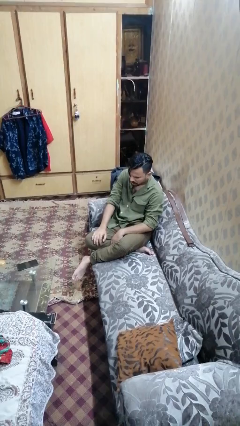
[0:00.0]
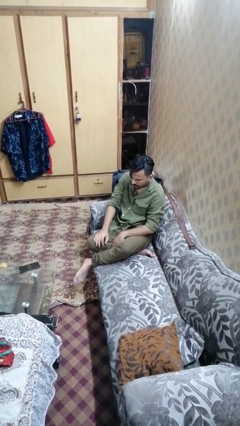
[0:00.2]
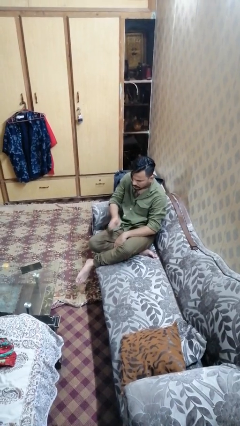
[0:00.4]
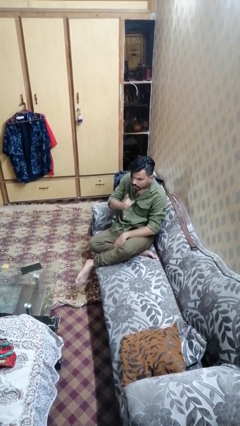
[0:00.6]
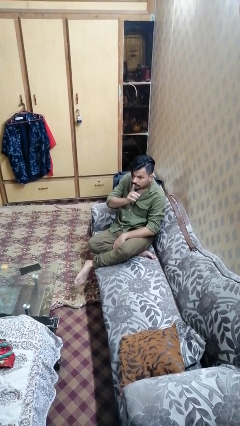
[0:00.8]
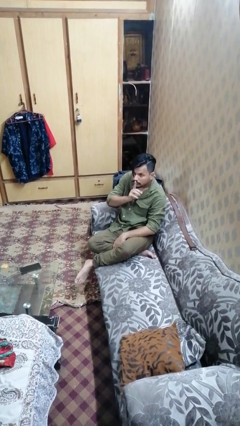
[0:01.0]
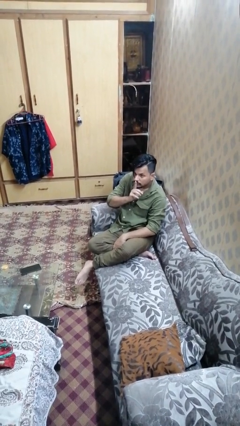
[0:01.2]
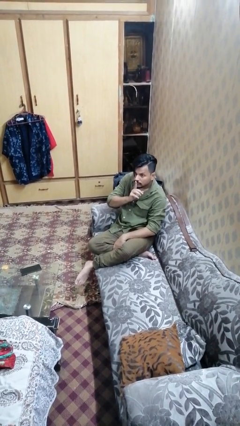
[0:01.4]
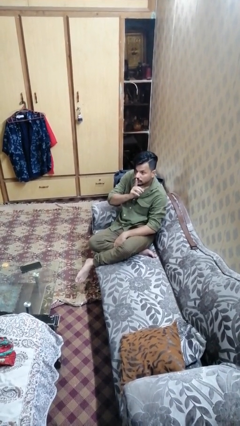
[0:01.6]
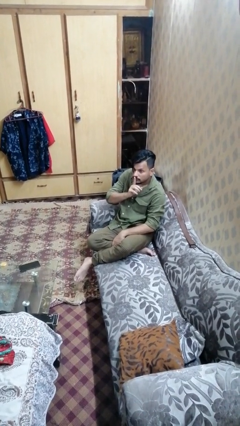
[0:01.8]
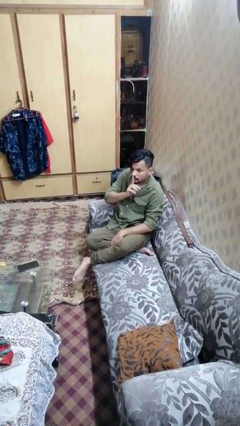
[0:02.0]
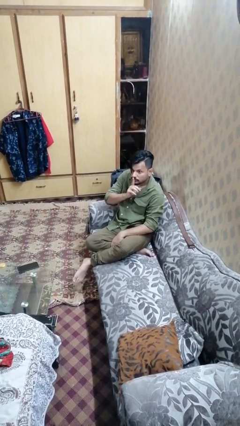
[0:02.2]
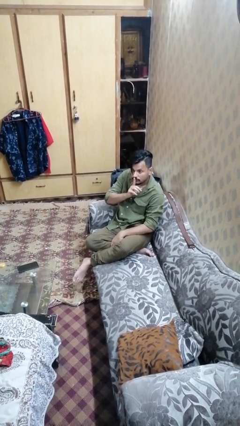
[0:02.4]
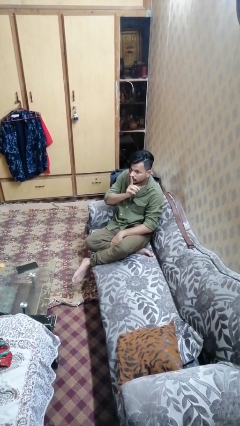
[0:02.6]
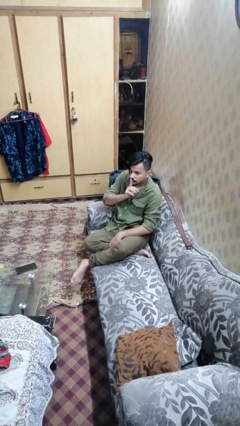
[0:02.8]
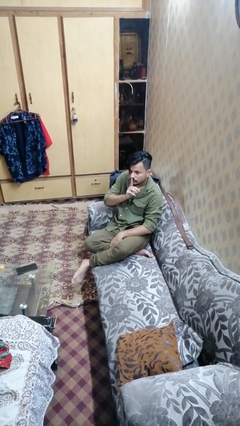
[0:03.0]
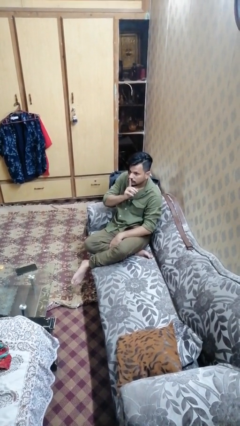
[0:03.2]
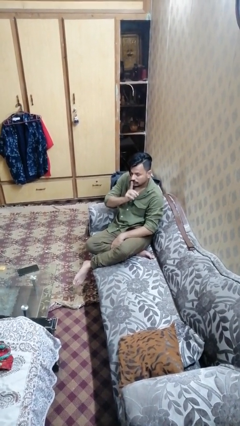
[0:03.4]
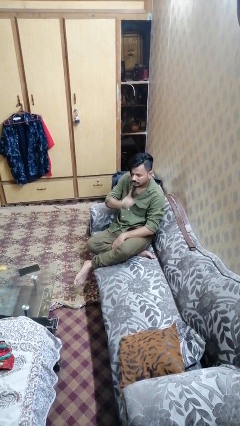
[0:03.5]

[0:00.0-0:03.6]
person gestures be quiet

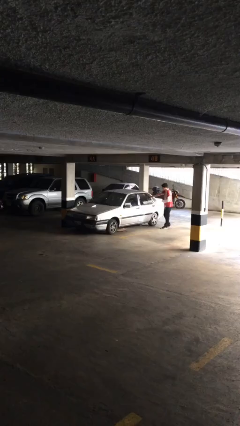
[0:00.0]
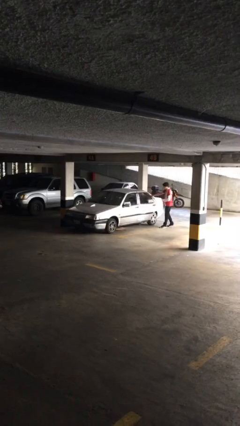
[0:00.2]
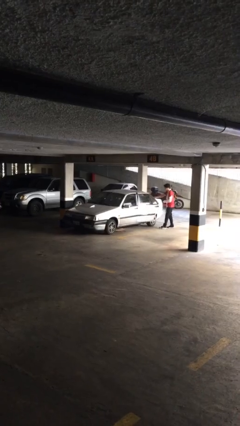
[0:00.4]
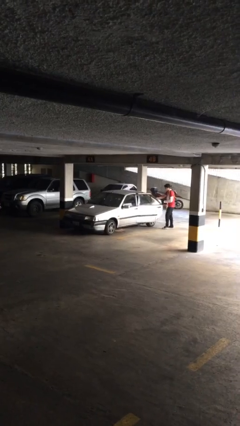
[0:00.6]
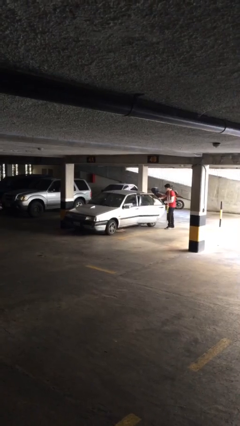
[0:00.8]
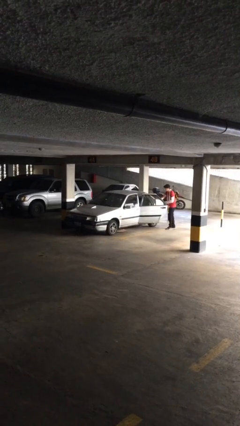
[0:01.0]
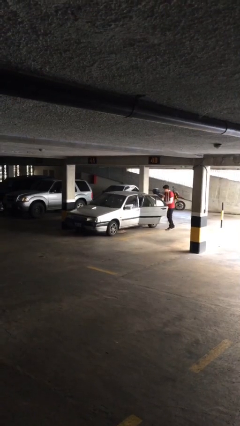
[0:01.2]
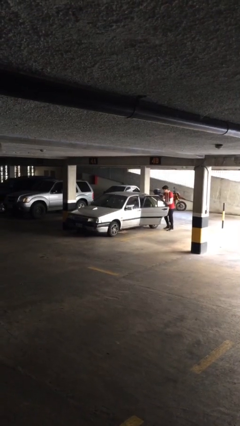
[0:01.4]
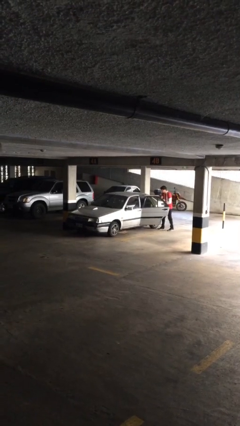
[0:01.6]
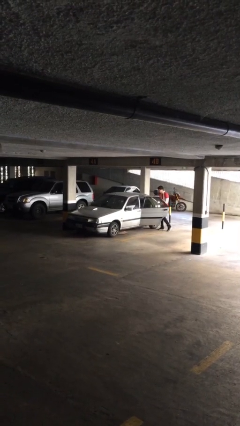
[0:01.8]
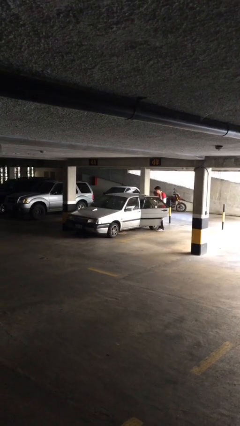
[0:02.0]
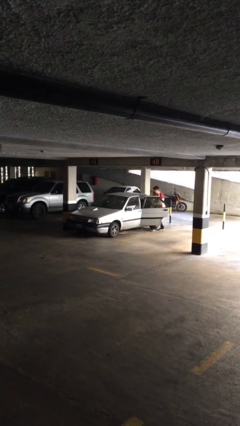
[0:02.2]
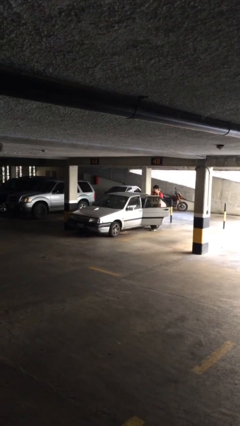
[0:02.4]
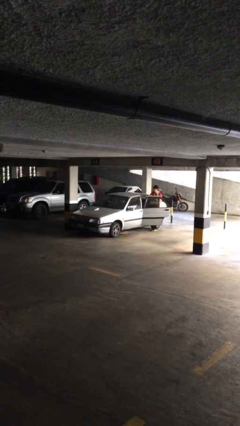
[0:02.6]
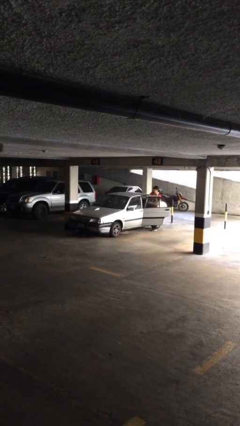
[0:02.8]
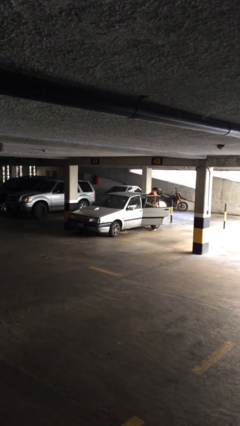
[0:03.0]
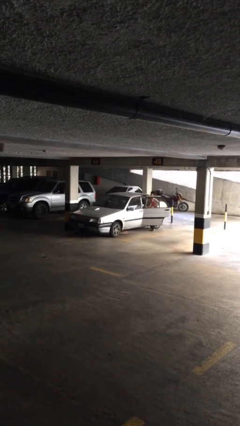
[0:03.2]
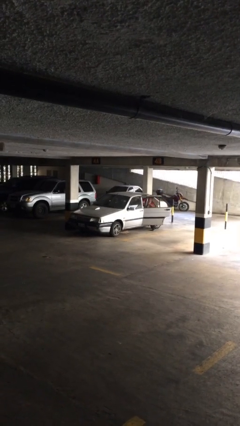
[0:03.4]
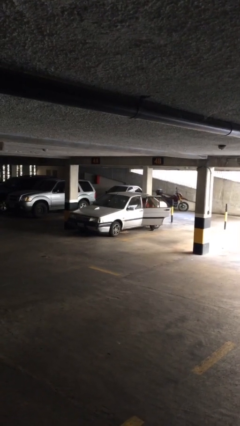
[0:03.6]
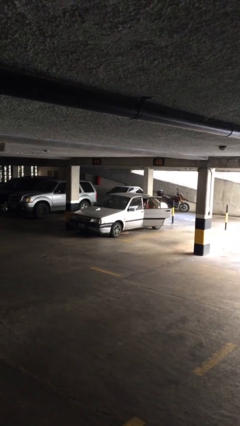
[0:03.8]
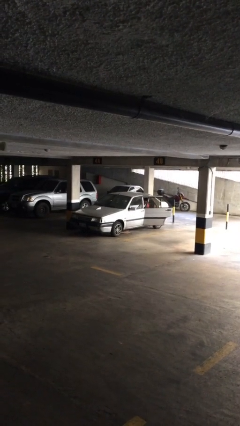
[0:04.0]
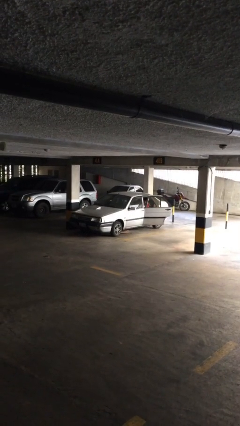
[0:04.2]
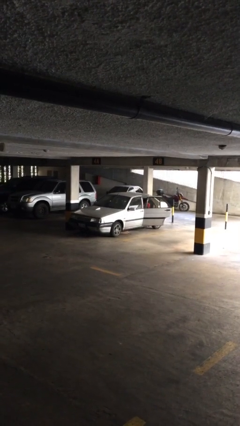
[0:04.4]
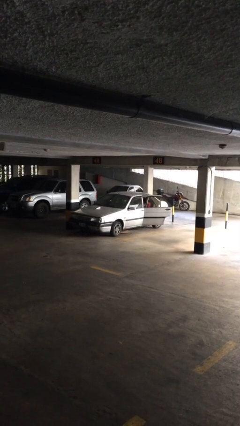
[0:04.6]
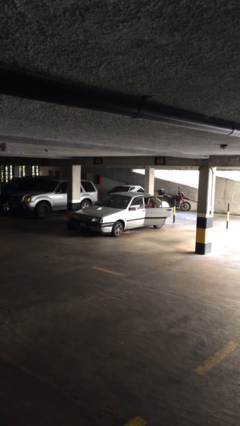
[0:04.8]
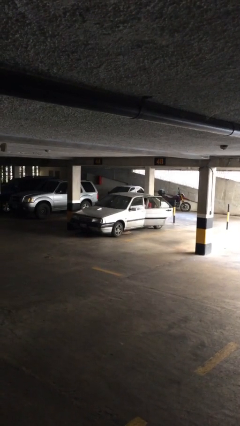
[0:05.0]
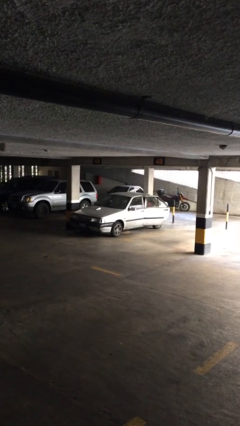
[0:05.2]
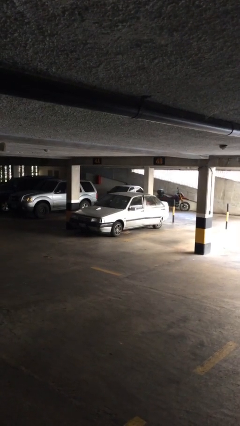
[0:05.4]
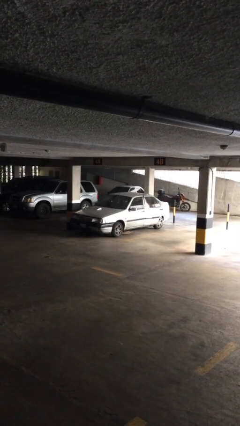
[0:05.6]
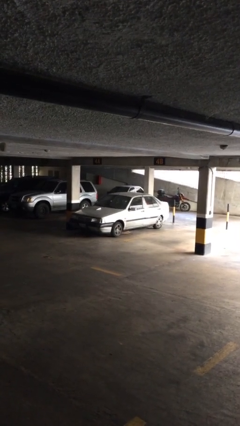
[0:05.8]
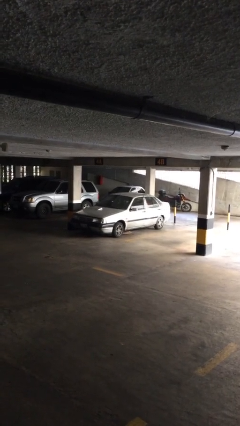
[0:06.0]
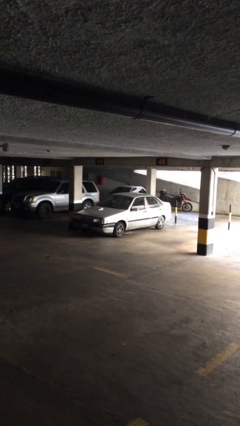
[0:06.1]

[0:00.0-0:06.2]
car picks up person

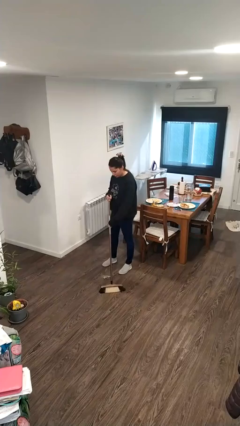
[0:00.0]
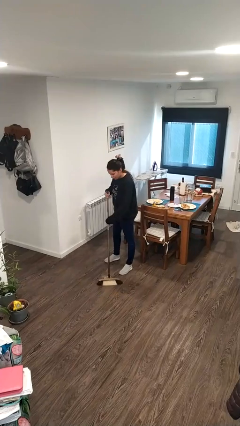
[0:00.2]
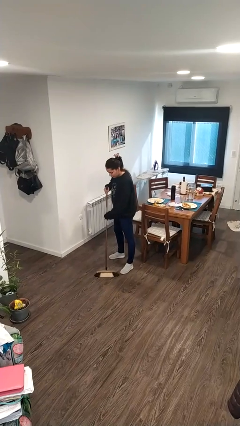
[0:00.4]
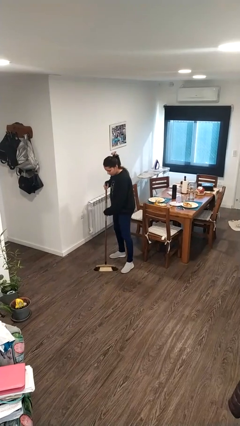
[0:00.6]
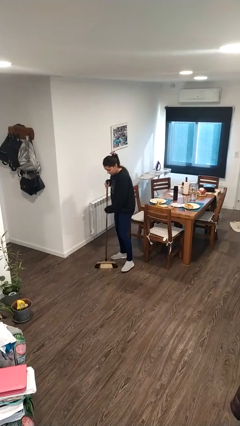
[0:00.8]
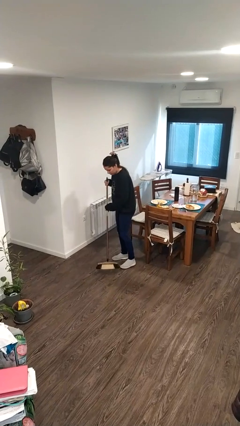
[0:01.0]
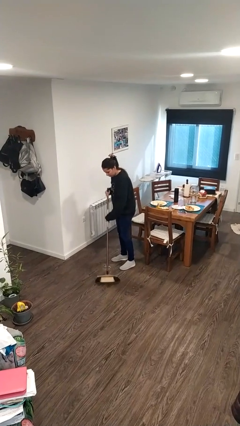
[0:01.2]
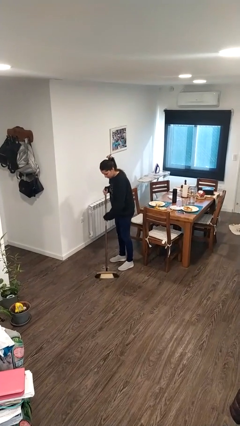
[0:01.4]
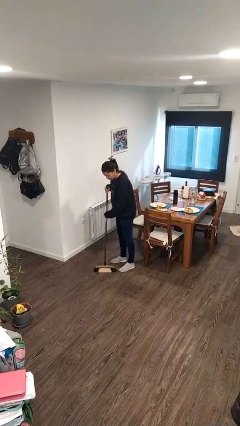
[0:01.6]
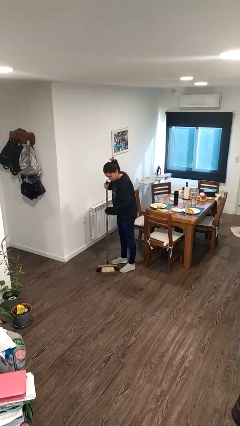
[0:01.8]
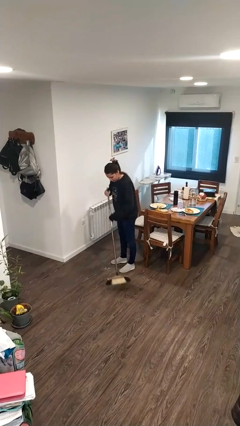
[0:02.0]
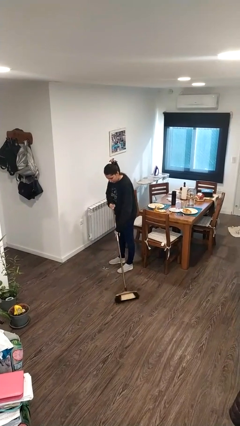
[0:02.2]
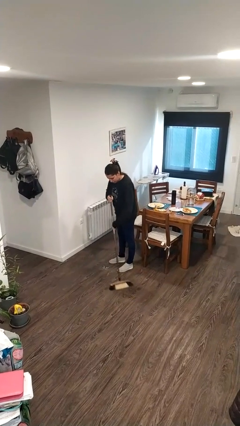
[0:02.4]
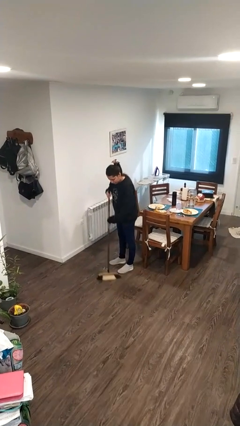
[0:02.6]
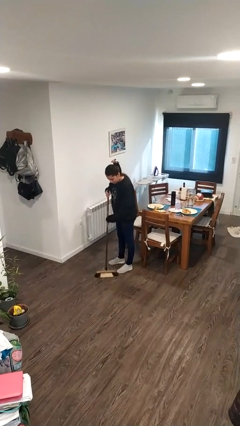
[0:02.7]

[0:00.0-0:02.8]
person sweeps floor

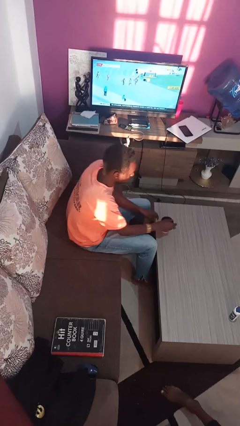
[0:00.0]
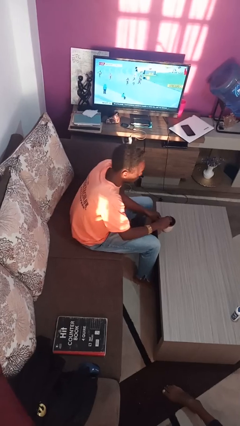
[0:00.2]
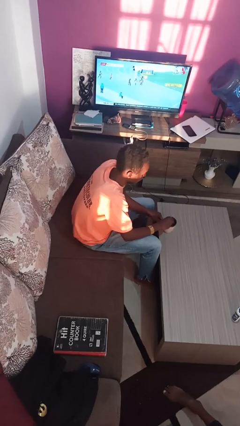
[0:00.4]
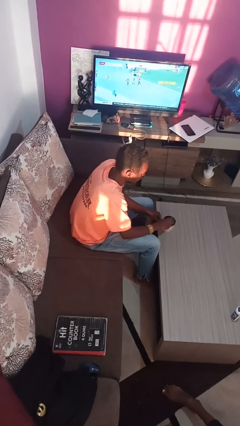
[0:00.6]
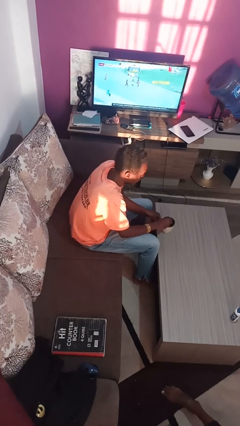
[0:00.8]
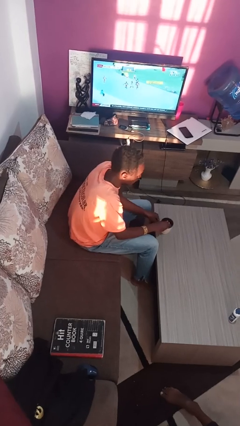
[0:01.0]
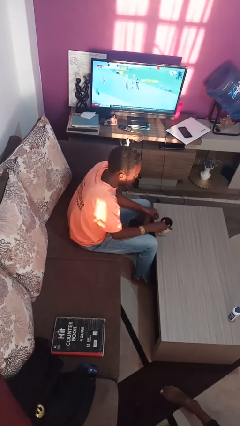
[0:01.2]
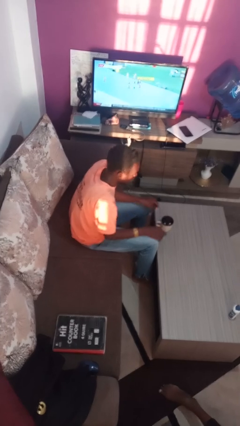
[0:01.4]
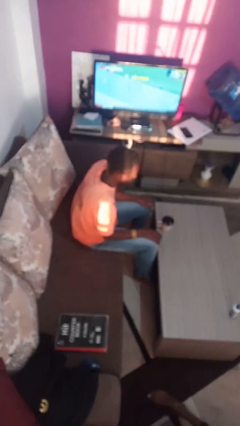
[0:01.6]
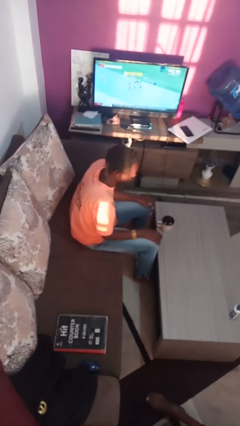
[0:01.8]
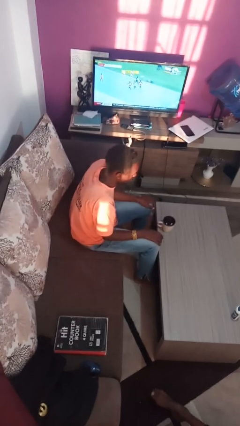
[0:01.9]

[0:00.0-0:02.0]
person stirs mug

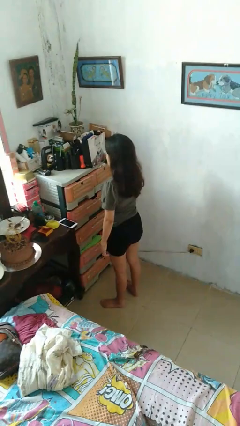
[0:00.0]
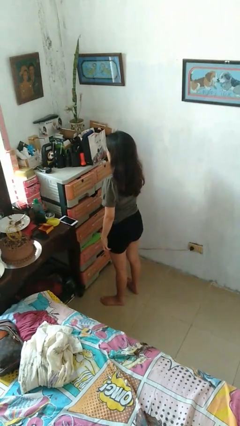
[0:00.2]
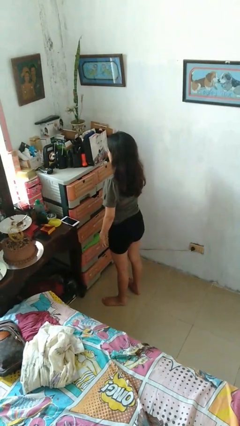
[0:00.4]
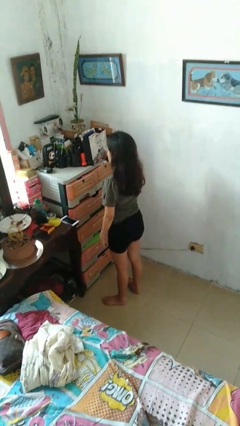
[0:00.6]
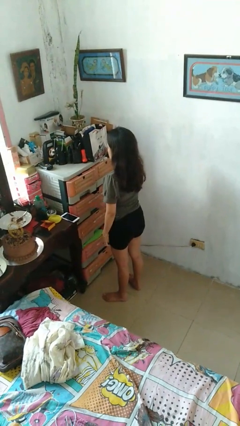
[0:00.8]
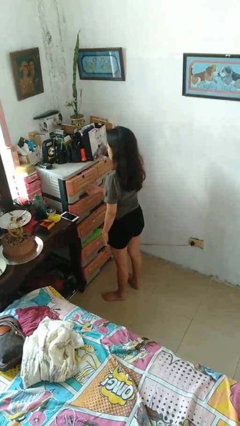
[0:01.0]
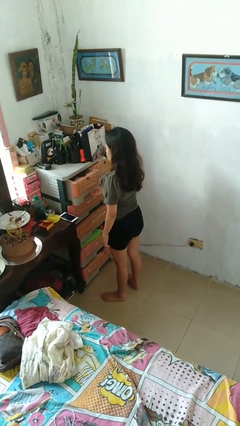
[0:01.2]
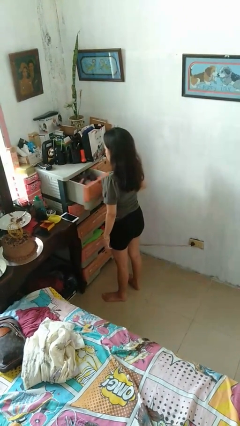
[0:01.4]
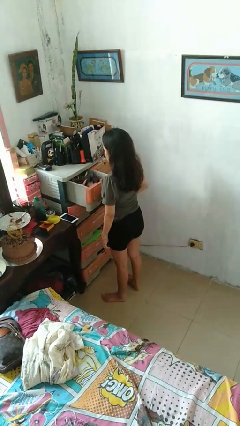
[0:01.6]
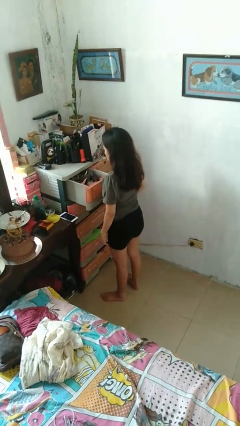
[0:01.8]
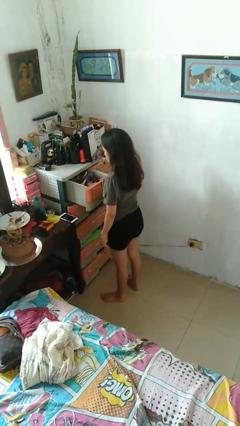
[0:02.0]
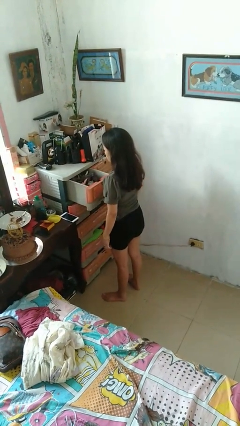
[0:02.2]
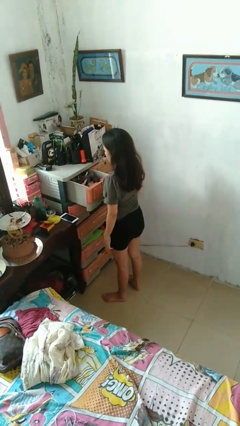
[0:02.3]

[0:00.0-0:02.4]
person opens dresser drawer

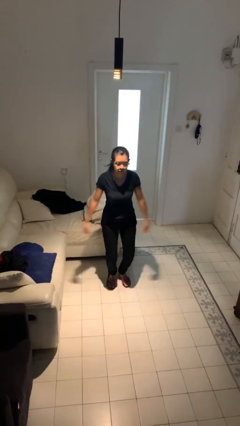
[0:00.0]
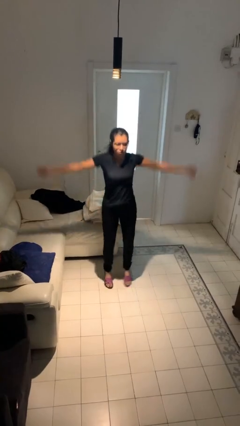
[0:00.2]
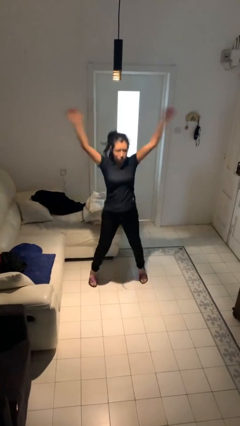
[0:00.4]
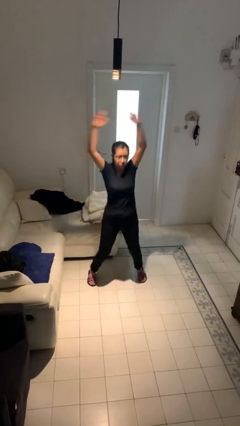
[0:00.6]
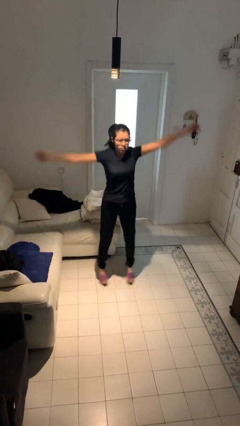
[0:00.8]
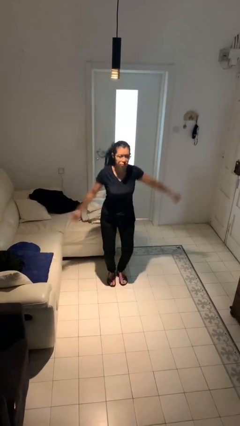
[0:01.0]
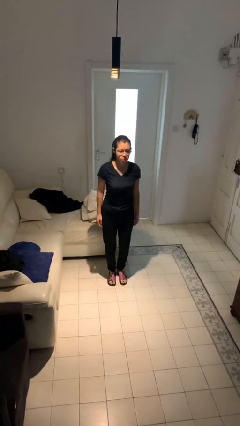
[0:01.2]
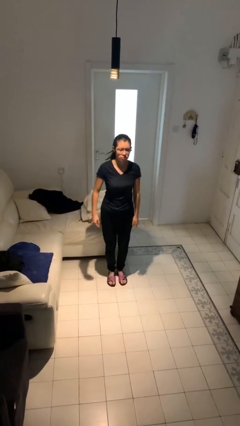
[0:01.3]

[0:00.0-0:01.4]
person jumps
